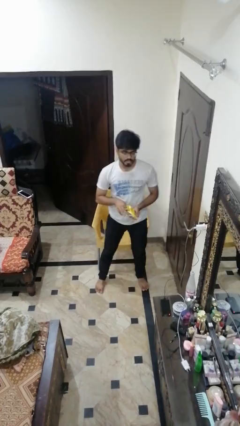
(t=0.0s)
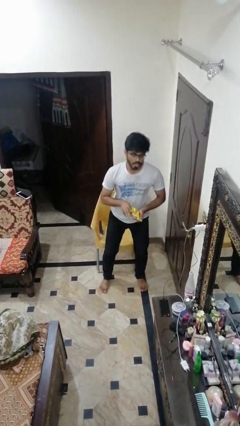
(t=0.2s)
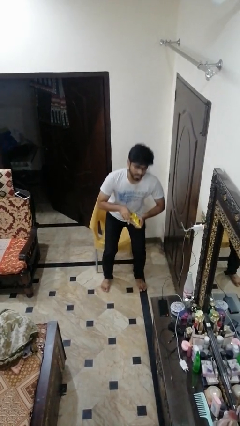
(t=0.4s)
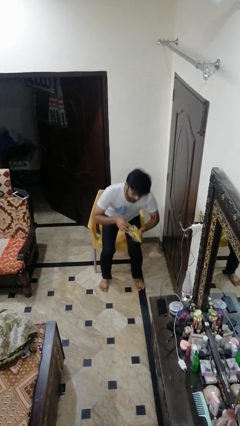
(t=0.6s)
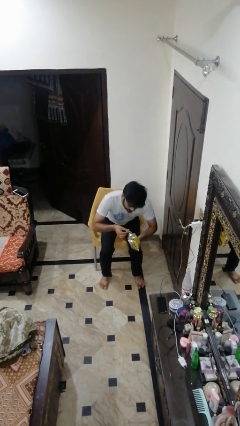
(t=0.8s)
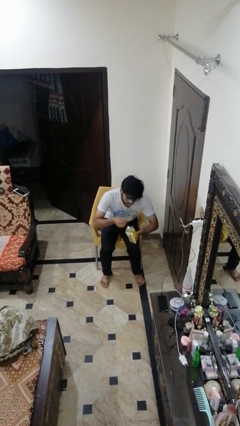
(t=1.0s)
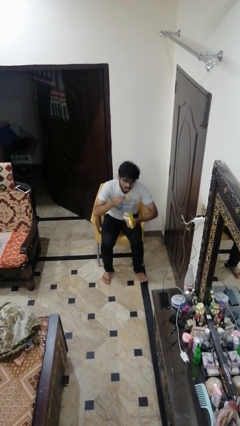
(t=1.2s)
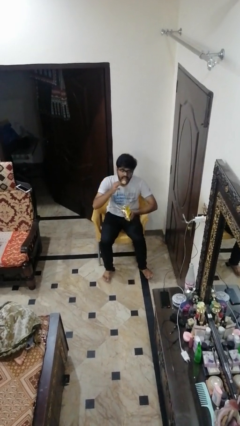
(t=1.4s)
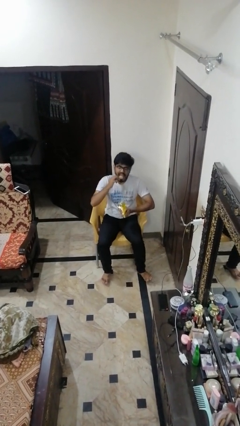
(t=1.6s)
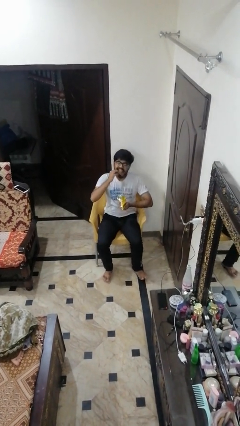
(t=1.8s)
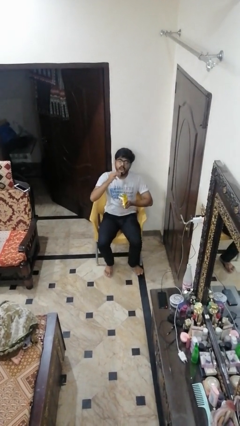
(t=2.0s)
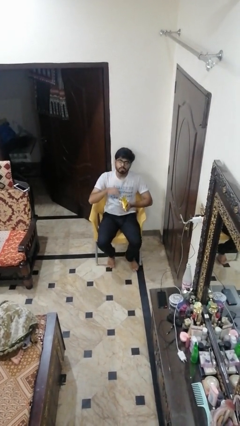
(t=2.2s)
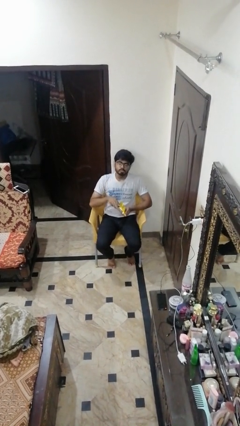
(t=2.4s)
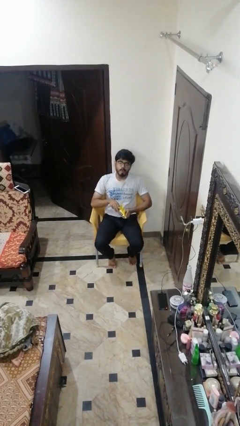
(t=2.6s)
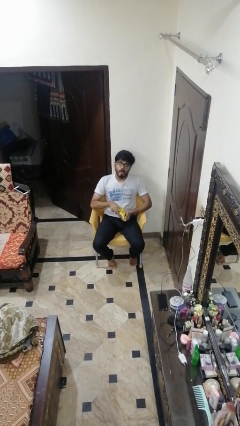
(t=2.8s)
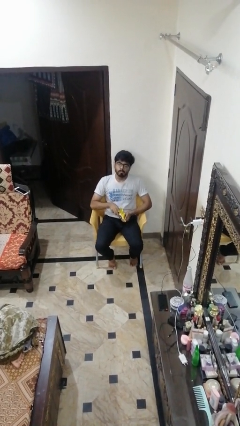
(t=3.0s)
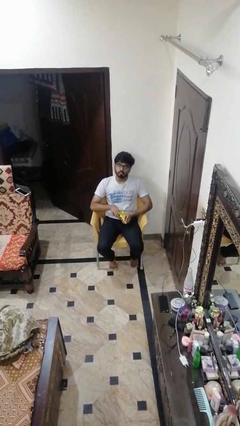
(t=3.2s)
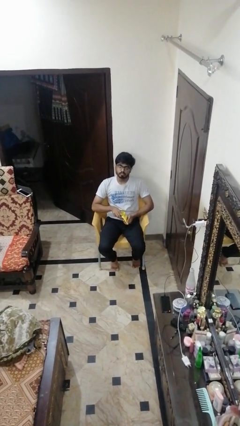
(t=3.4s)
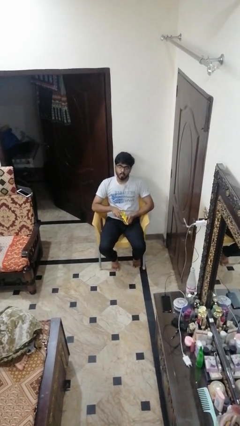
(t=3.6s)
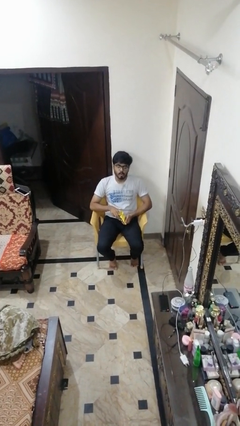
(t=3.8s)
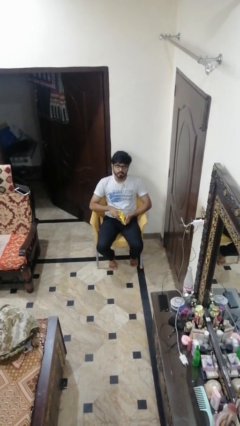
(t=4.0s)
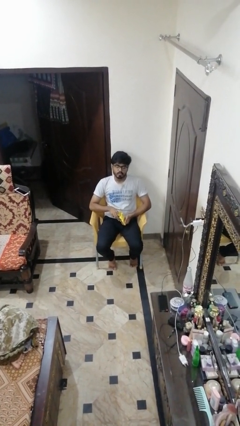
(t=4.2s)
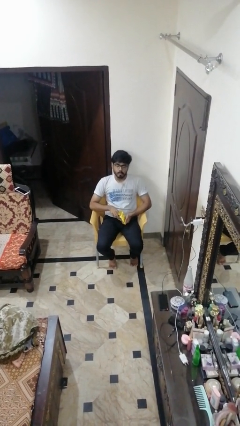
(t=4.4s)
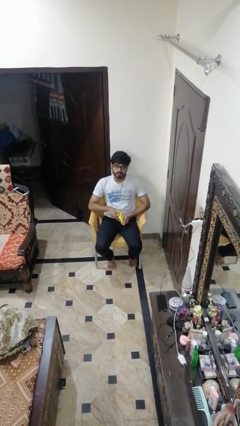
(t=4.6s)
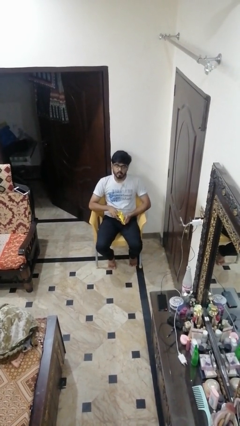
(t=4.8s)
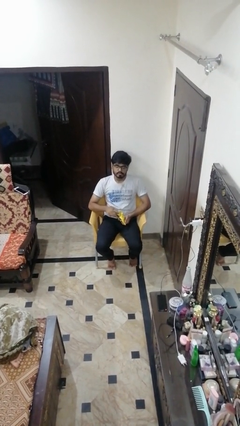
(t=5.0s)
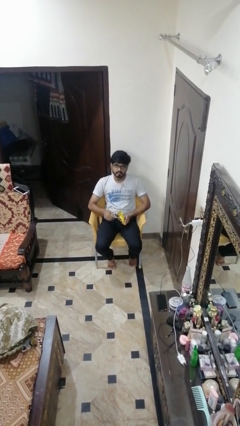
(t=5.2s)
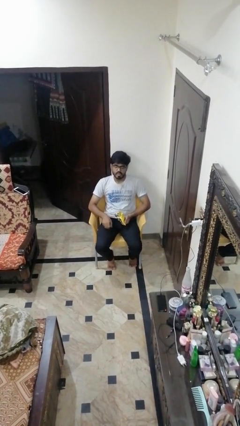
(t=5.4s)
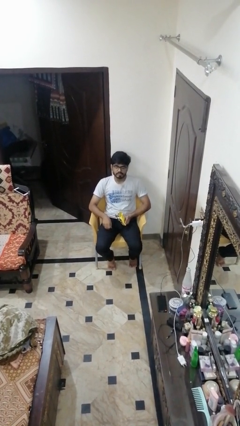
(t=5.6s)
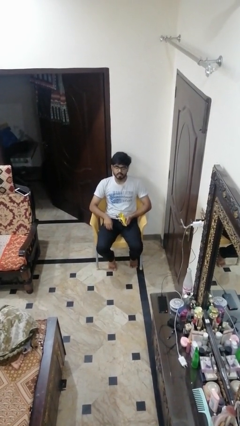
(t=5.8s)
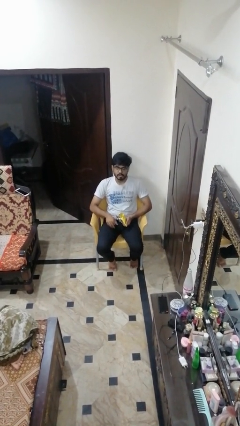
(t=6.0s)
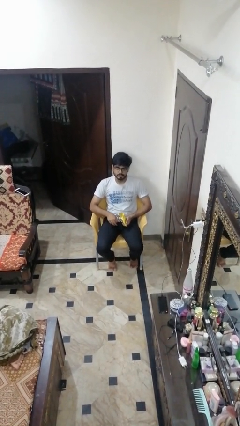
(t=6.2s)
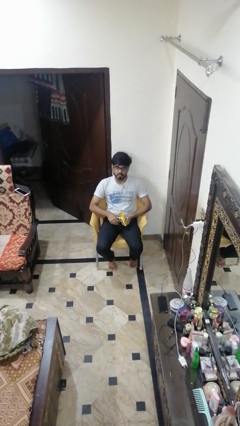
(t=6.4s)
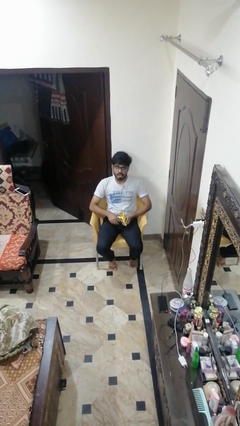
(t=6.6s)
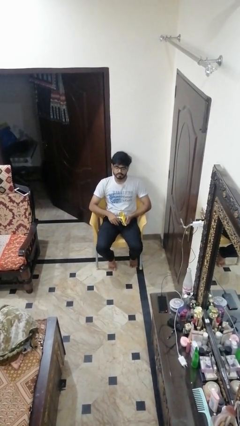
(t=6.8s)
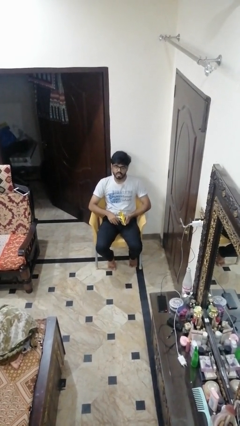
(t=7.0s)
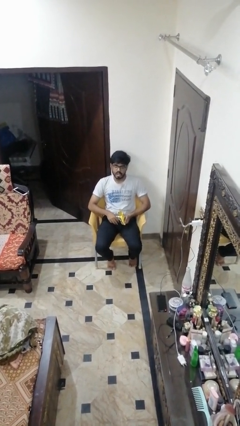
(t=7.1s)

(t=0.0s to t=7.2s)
person eats snack from bag

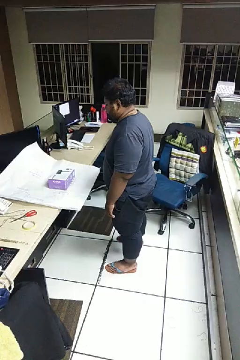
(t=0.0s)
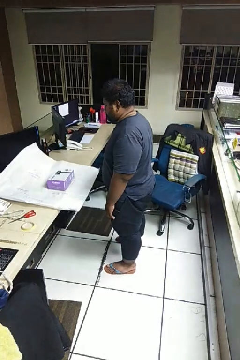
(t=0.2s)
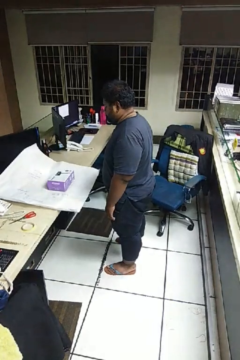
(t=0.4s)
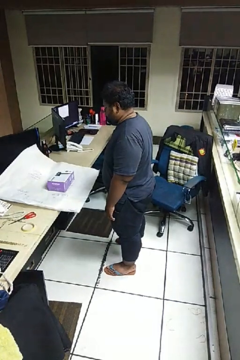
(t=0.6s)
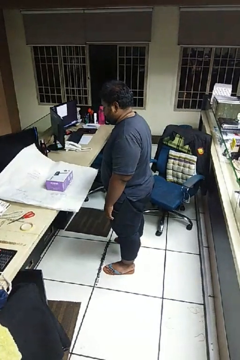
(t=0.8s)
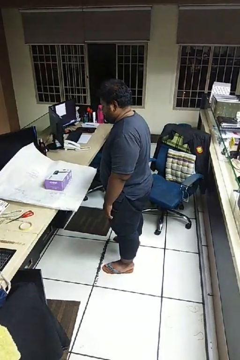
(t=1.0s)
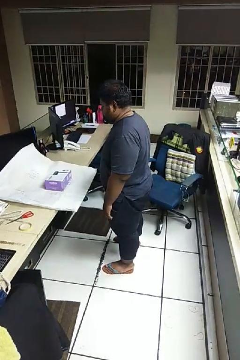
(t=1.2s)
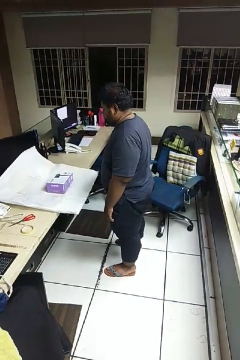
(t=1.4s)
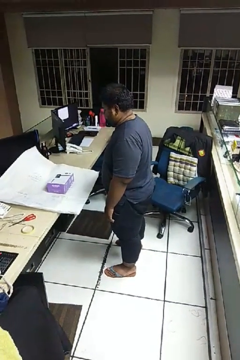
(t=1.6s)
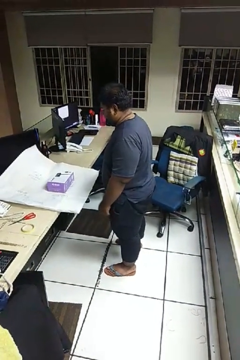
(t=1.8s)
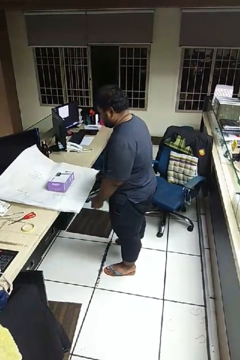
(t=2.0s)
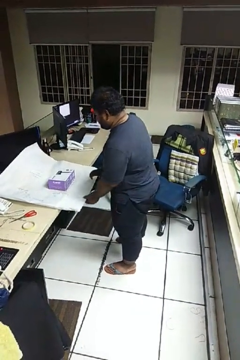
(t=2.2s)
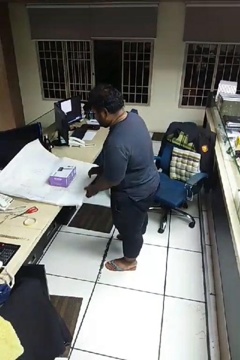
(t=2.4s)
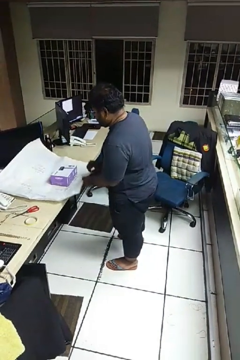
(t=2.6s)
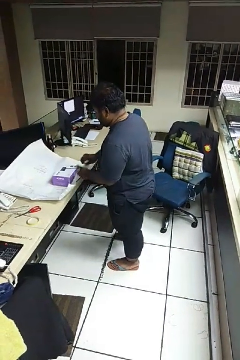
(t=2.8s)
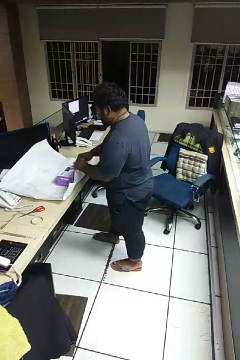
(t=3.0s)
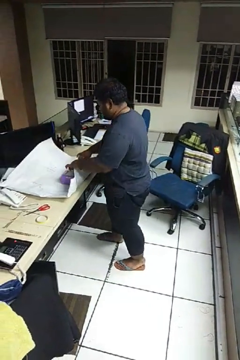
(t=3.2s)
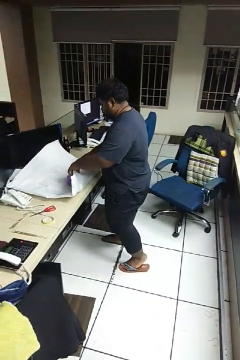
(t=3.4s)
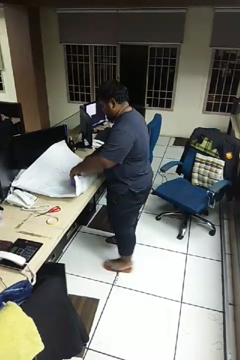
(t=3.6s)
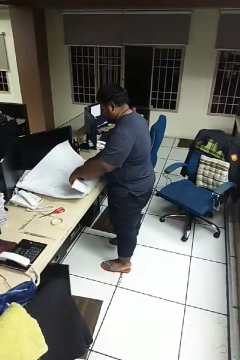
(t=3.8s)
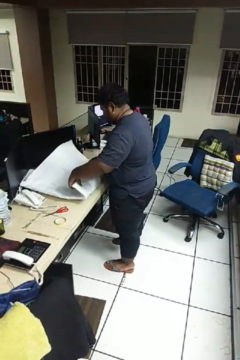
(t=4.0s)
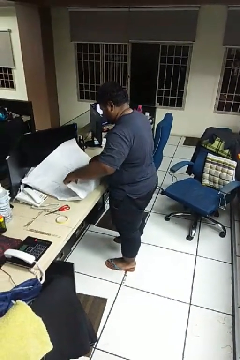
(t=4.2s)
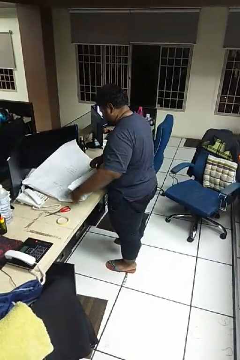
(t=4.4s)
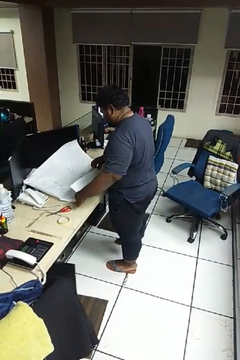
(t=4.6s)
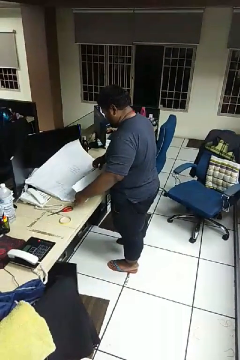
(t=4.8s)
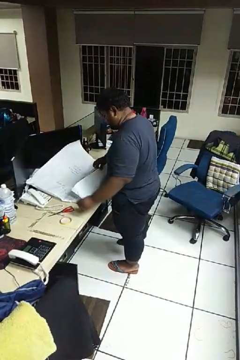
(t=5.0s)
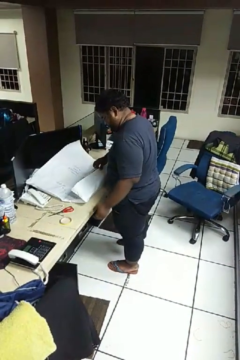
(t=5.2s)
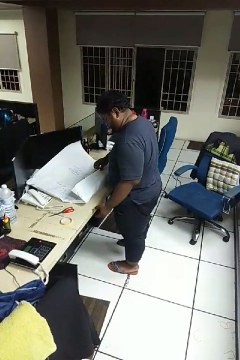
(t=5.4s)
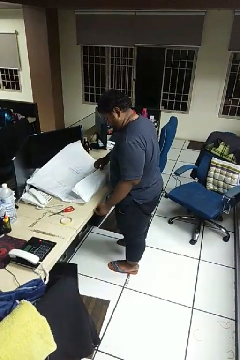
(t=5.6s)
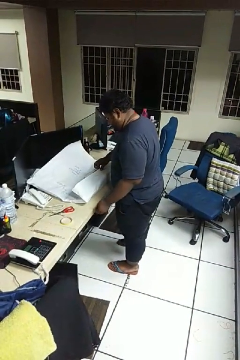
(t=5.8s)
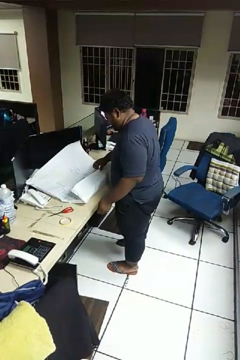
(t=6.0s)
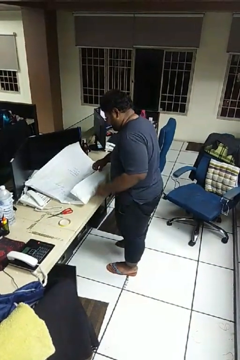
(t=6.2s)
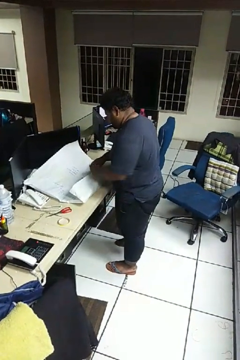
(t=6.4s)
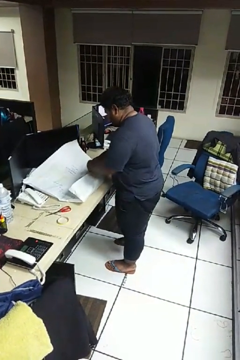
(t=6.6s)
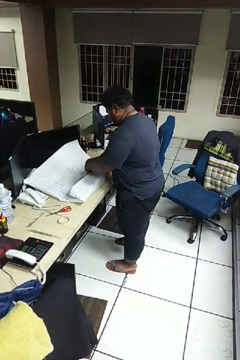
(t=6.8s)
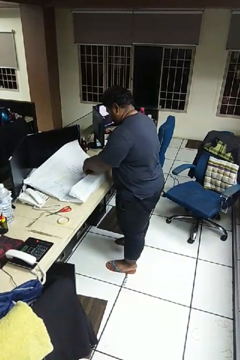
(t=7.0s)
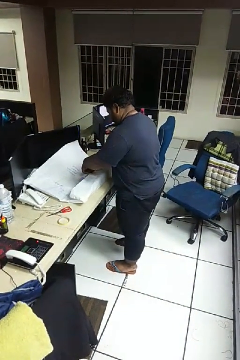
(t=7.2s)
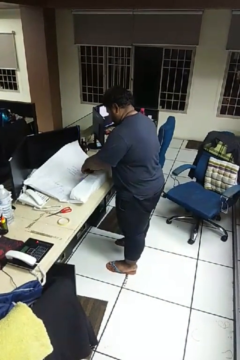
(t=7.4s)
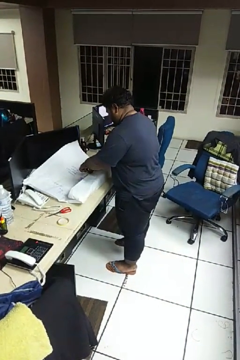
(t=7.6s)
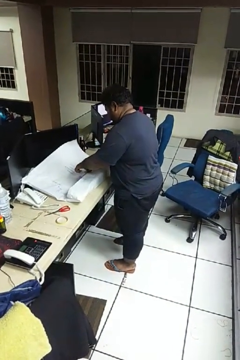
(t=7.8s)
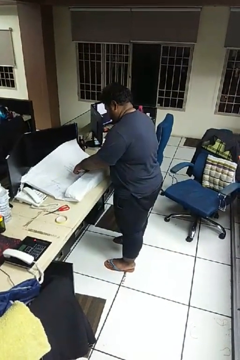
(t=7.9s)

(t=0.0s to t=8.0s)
person wraps box

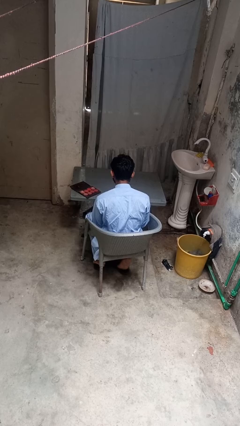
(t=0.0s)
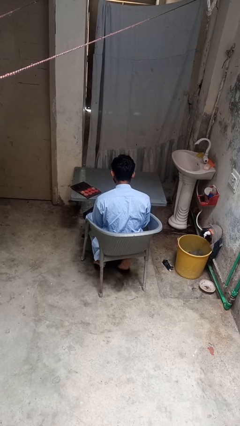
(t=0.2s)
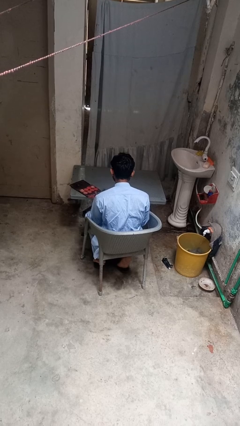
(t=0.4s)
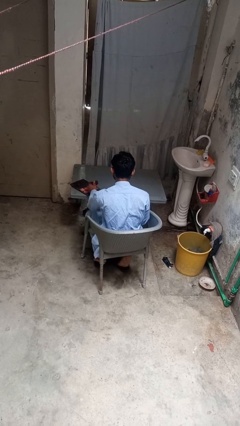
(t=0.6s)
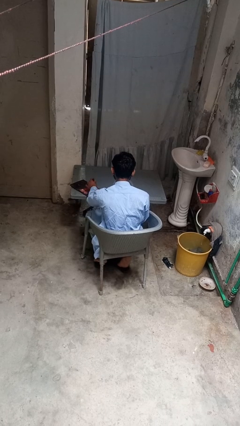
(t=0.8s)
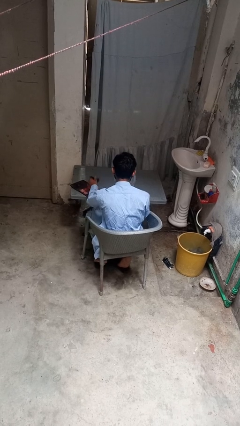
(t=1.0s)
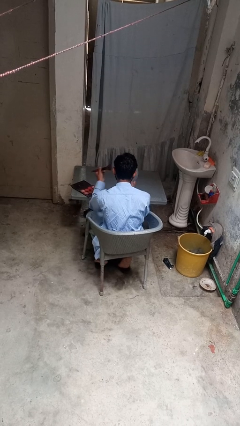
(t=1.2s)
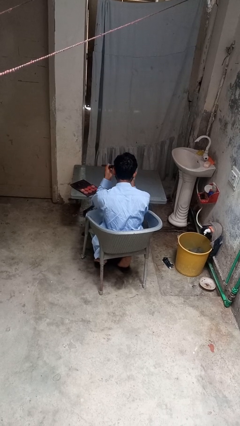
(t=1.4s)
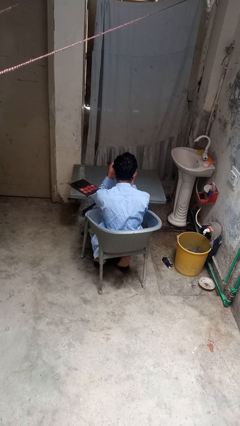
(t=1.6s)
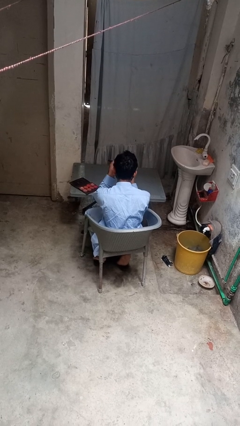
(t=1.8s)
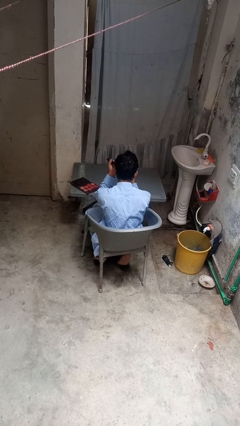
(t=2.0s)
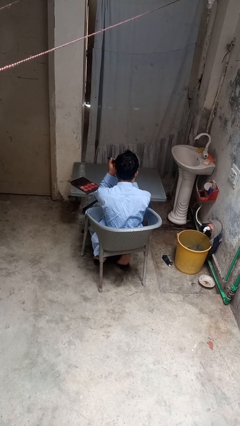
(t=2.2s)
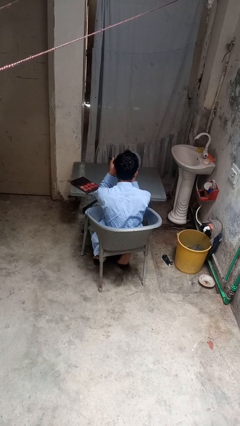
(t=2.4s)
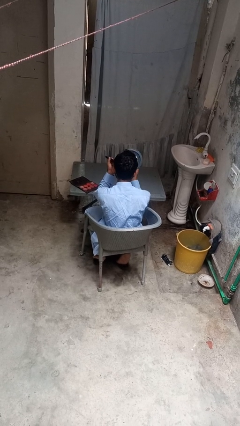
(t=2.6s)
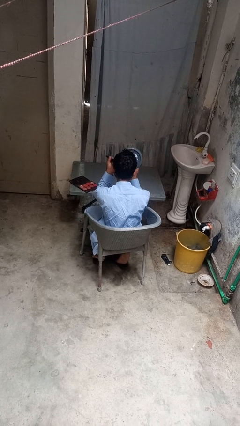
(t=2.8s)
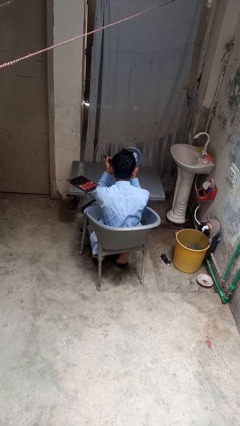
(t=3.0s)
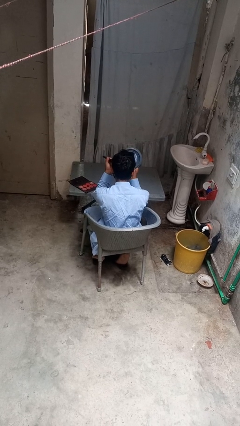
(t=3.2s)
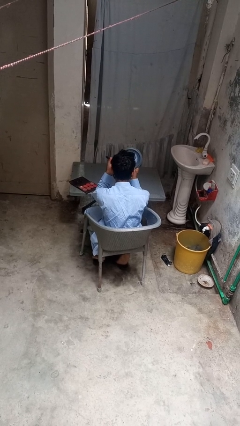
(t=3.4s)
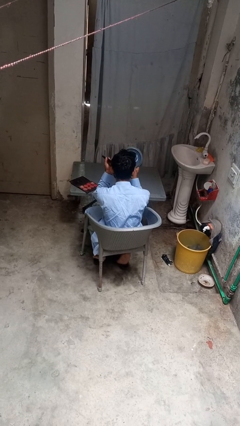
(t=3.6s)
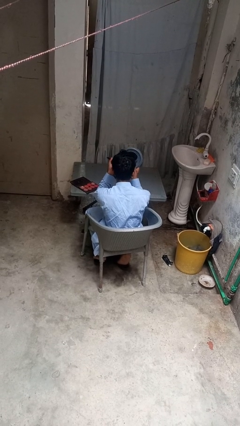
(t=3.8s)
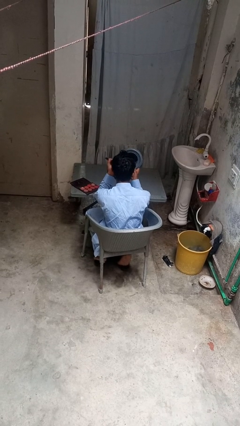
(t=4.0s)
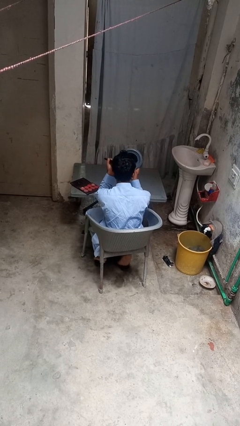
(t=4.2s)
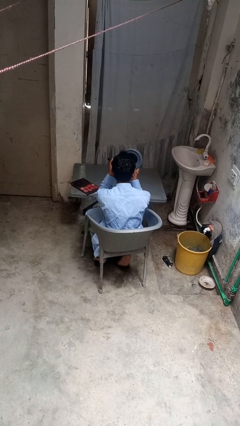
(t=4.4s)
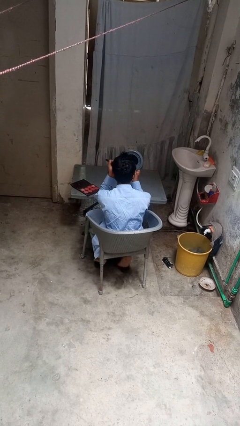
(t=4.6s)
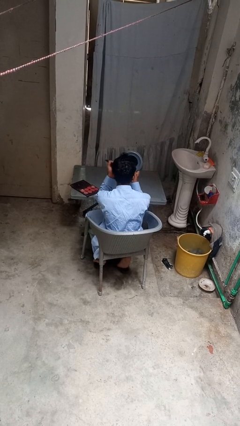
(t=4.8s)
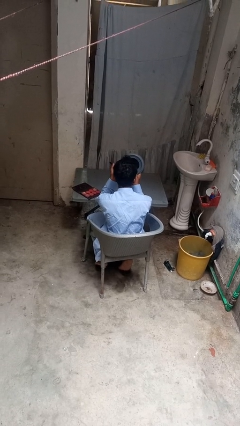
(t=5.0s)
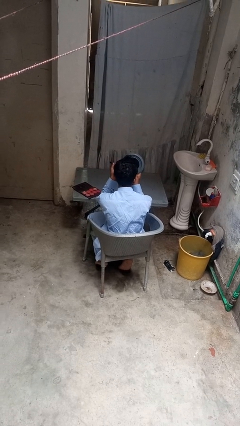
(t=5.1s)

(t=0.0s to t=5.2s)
person applies eye makeup
